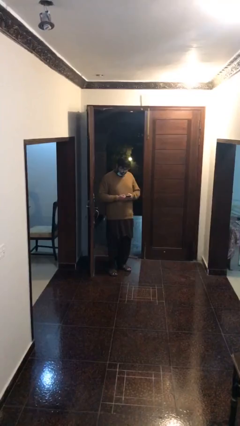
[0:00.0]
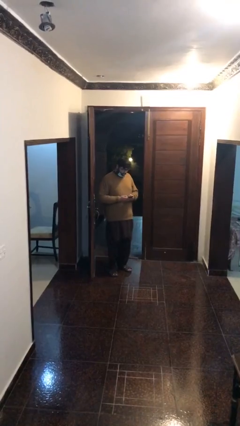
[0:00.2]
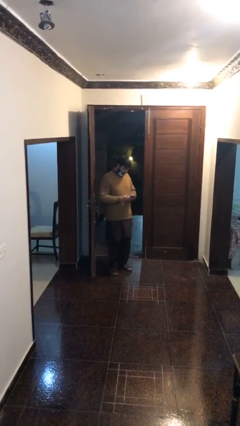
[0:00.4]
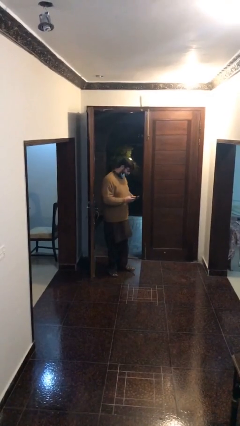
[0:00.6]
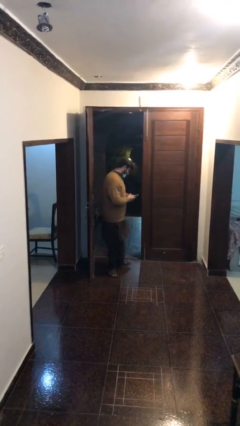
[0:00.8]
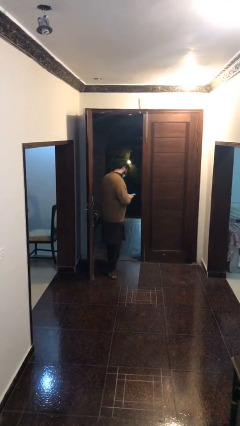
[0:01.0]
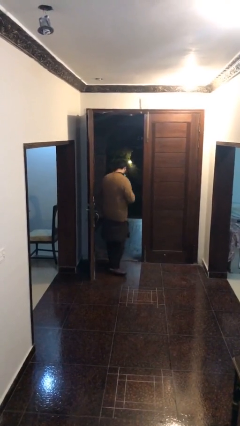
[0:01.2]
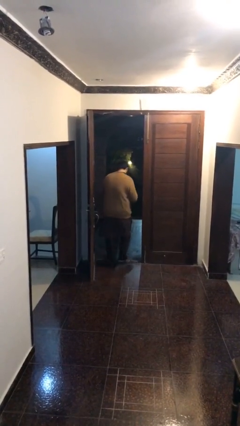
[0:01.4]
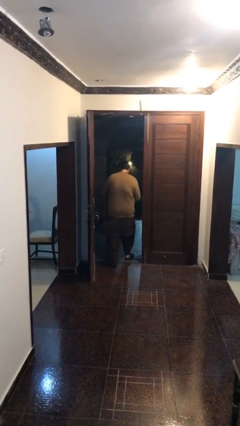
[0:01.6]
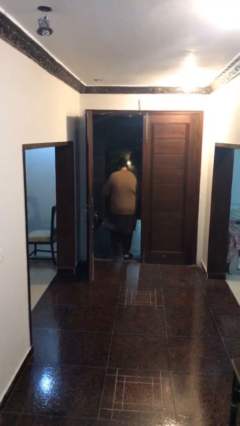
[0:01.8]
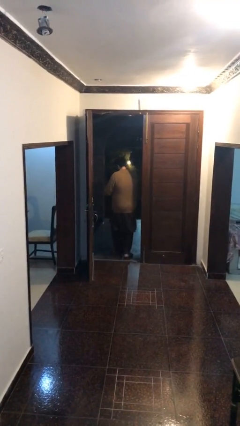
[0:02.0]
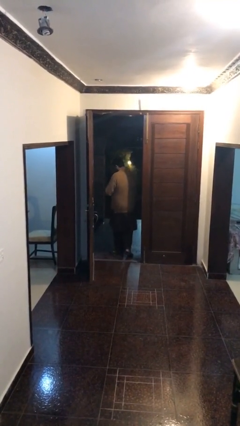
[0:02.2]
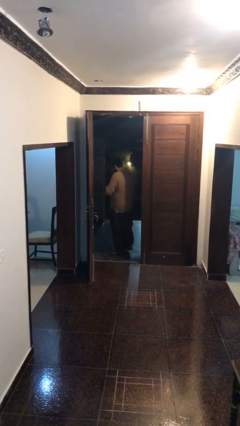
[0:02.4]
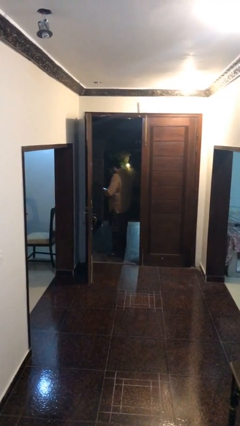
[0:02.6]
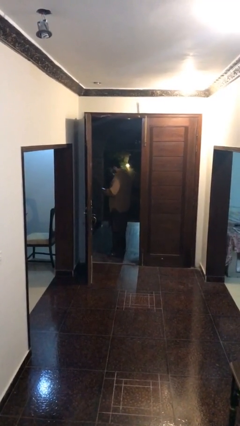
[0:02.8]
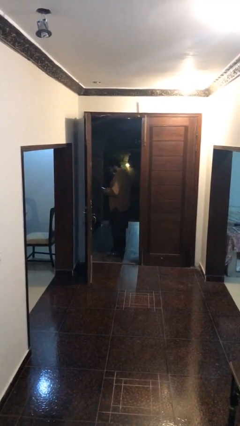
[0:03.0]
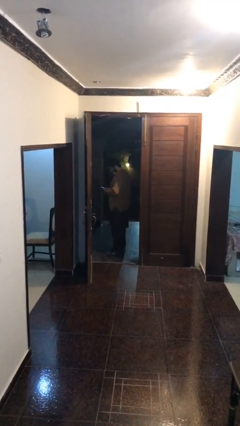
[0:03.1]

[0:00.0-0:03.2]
person exits scene through structure

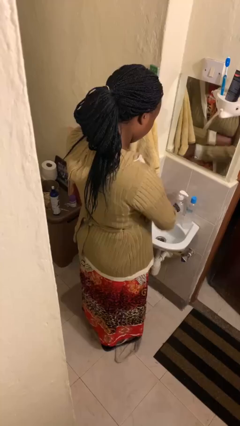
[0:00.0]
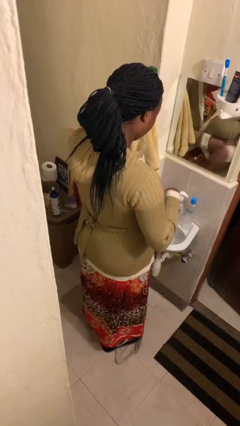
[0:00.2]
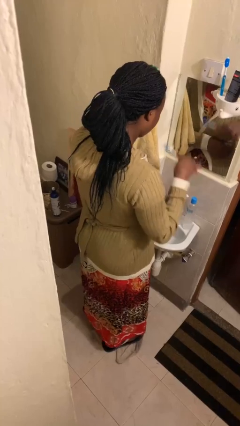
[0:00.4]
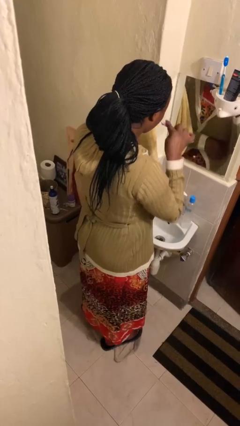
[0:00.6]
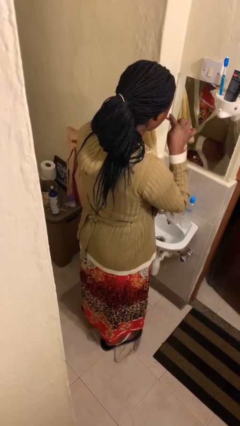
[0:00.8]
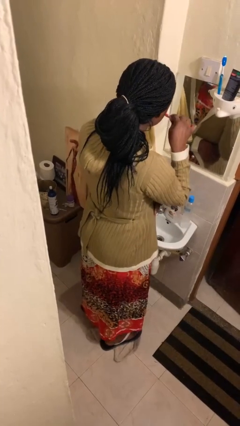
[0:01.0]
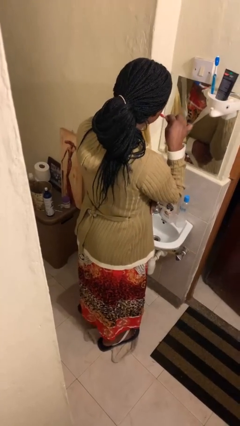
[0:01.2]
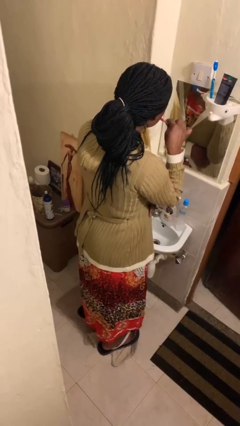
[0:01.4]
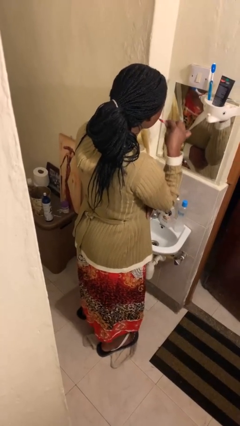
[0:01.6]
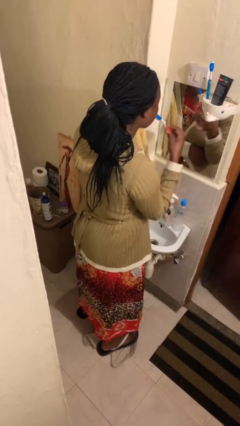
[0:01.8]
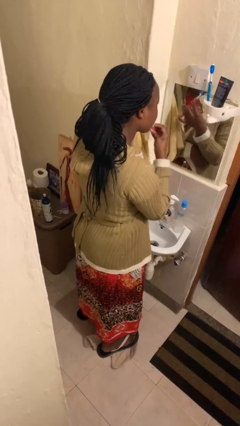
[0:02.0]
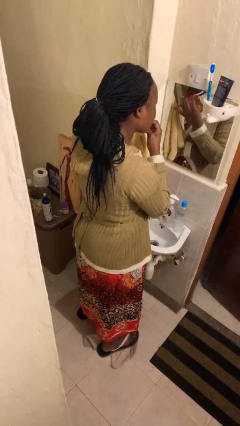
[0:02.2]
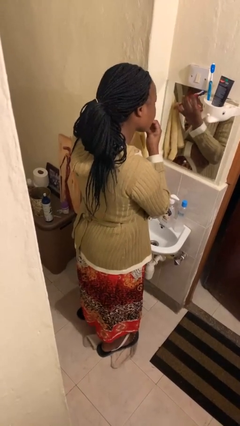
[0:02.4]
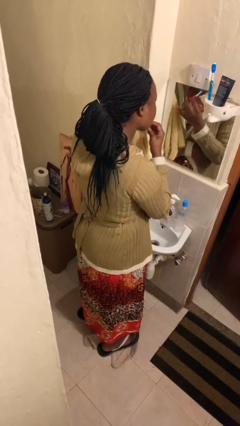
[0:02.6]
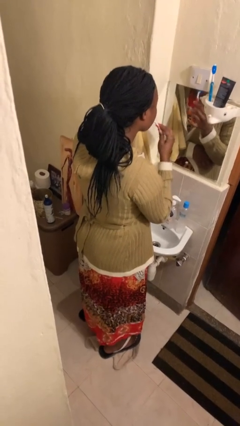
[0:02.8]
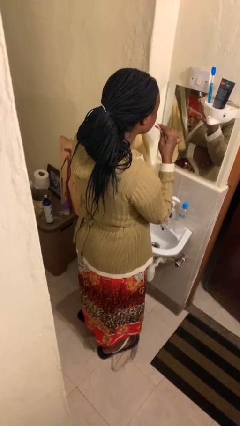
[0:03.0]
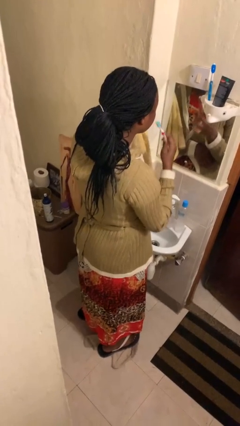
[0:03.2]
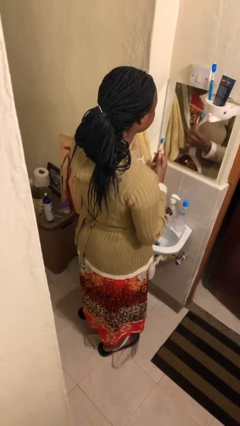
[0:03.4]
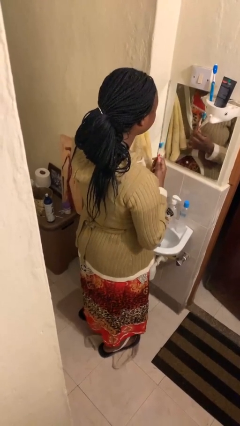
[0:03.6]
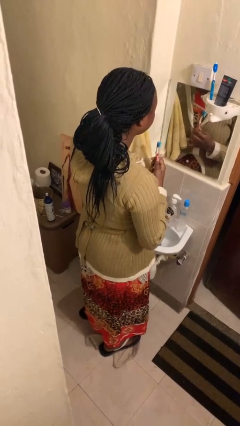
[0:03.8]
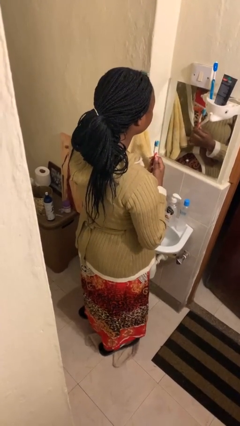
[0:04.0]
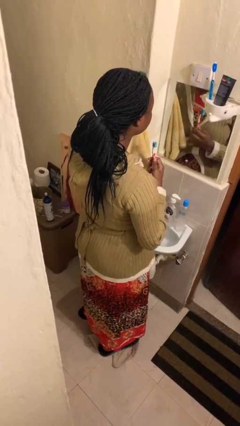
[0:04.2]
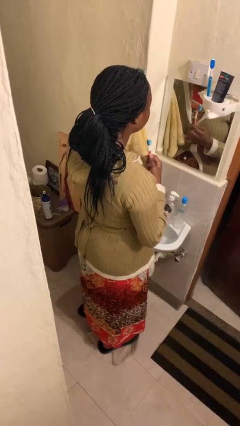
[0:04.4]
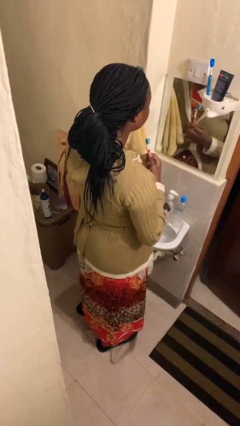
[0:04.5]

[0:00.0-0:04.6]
person brushes teeth

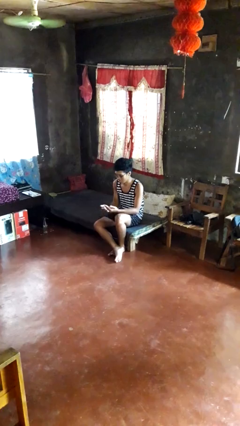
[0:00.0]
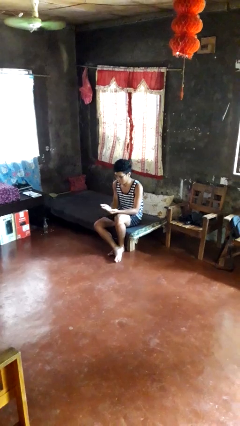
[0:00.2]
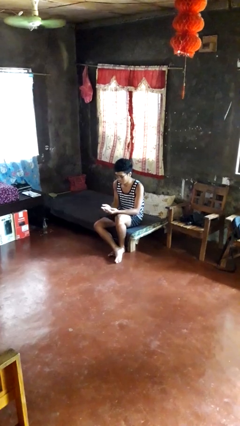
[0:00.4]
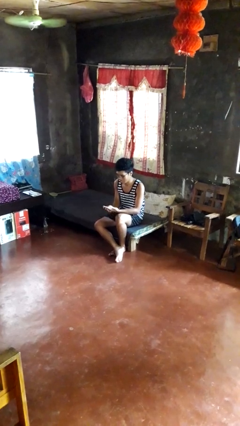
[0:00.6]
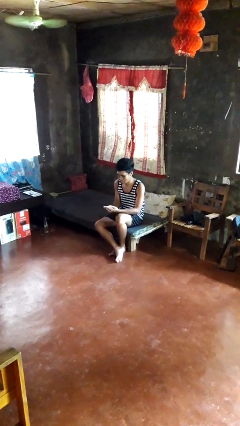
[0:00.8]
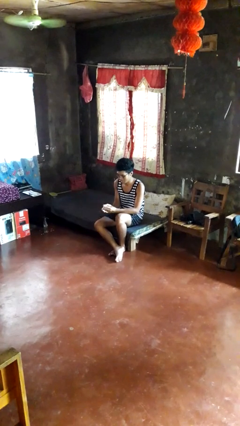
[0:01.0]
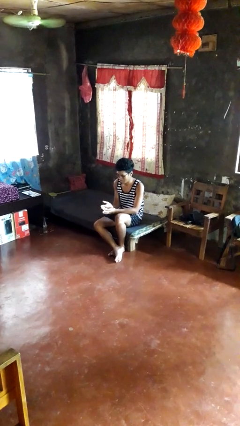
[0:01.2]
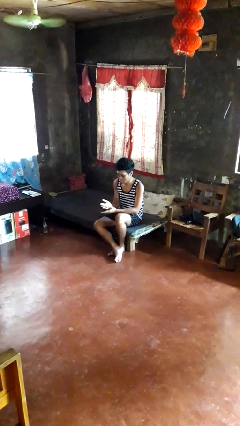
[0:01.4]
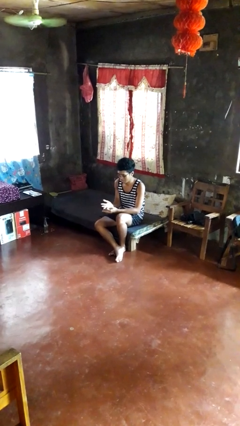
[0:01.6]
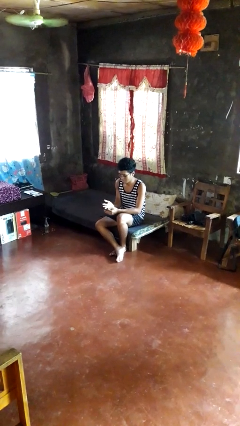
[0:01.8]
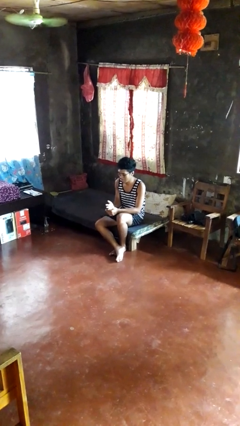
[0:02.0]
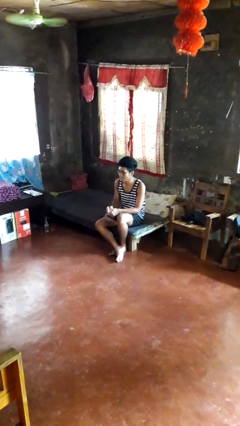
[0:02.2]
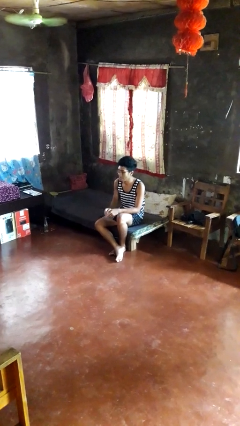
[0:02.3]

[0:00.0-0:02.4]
person looks at hands in lap

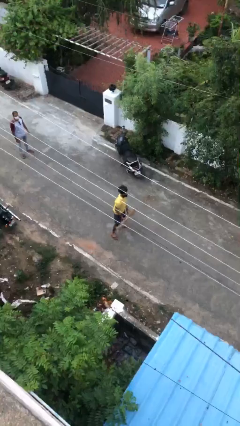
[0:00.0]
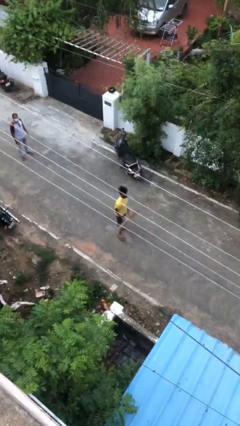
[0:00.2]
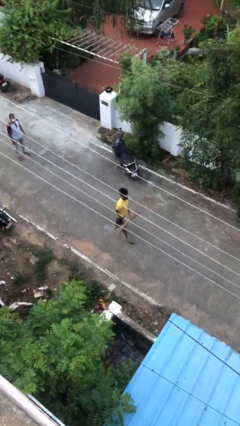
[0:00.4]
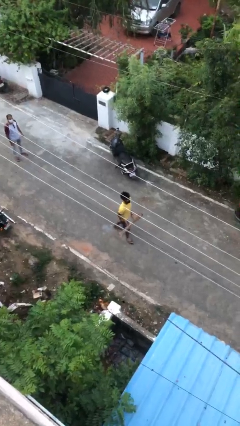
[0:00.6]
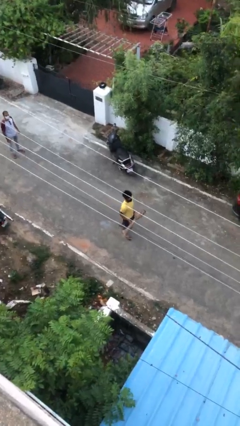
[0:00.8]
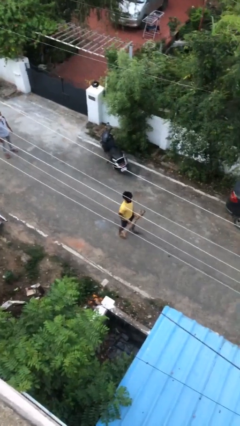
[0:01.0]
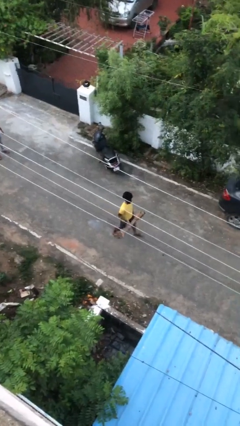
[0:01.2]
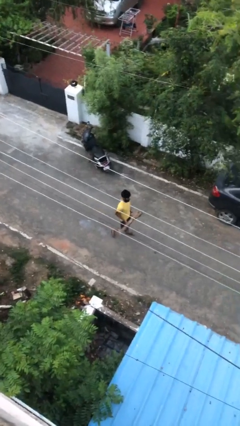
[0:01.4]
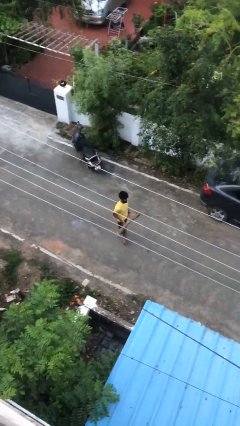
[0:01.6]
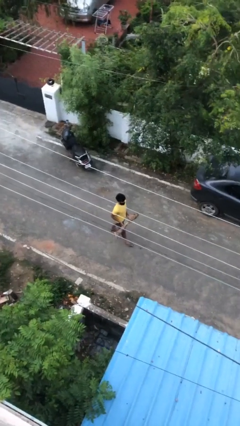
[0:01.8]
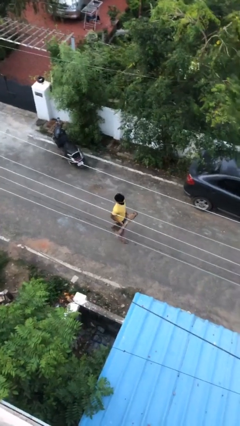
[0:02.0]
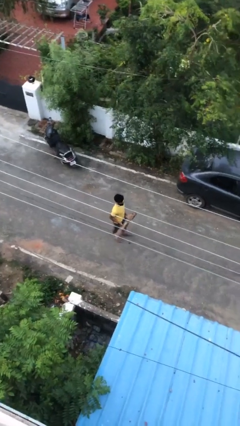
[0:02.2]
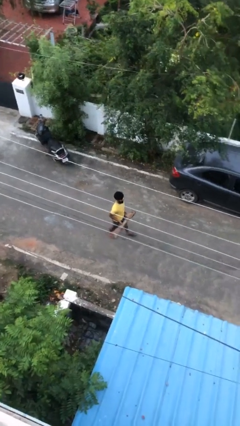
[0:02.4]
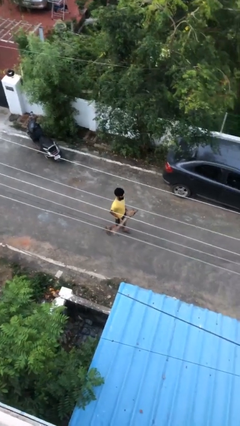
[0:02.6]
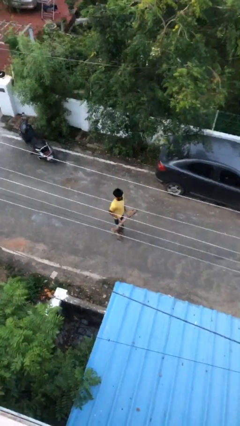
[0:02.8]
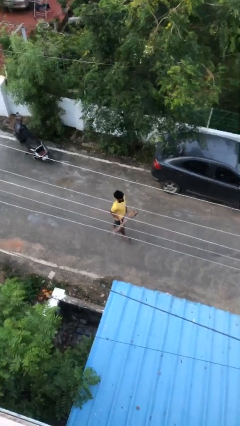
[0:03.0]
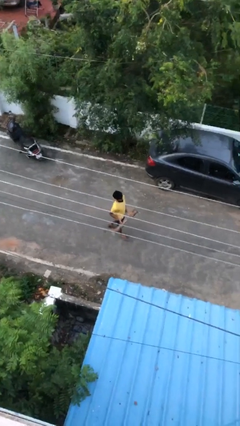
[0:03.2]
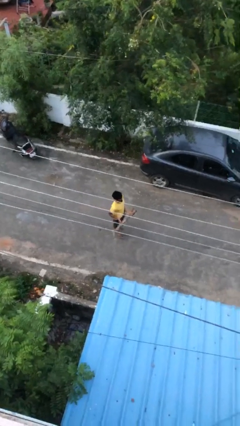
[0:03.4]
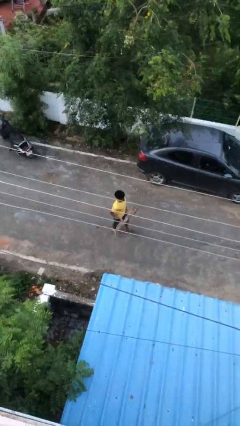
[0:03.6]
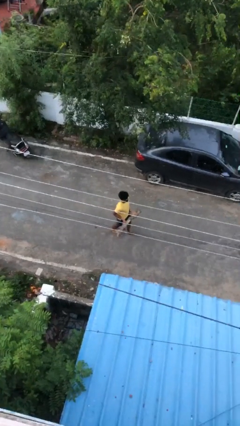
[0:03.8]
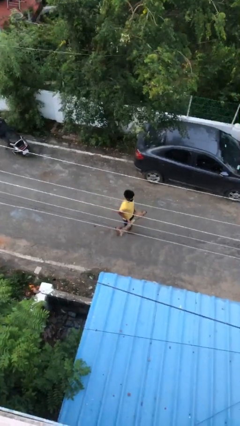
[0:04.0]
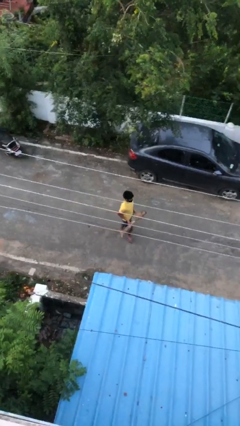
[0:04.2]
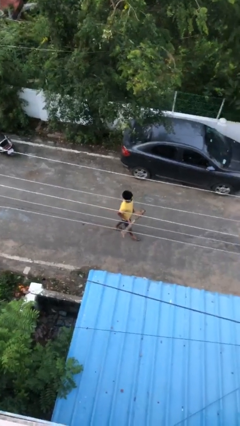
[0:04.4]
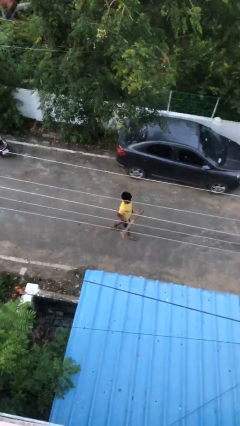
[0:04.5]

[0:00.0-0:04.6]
person carries heavy object

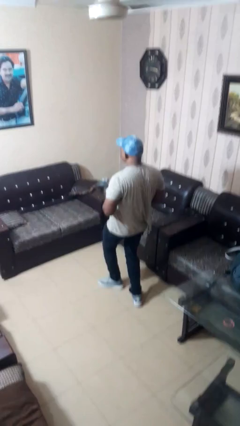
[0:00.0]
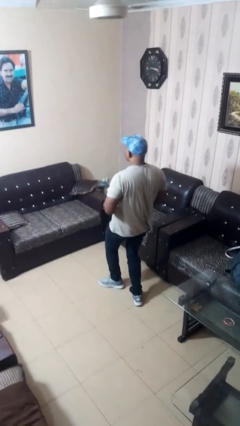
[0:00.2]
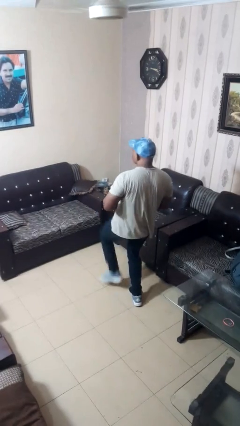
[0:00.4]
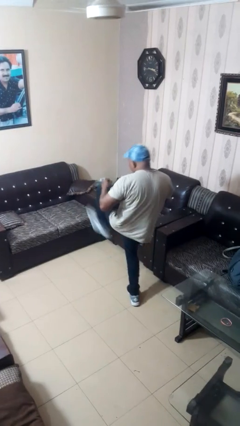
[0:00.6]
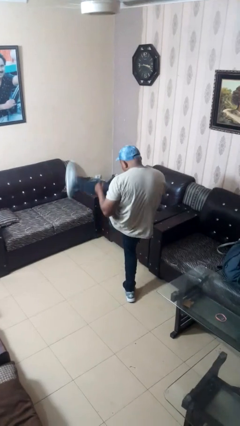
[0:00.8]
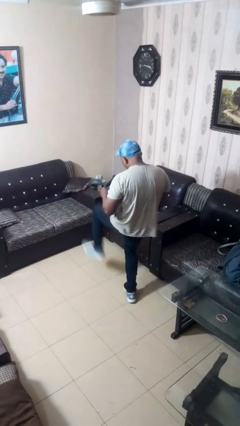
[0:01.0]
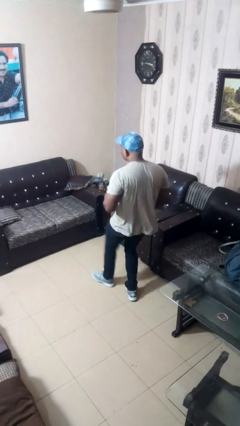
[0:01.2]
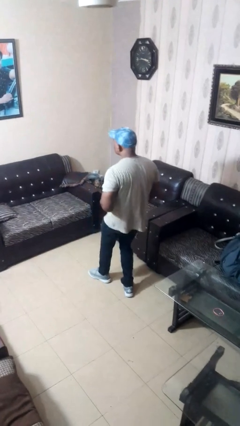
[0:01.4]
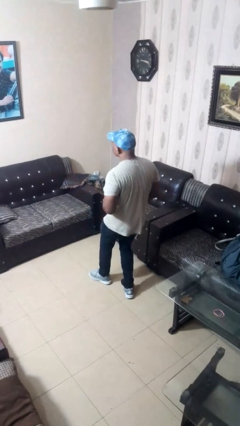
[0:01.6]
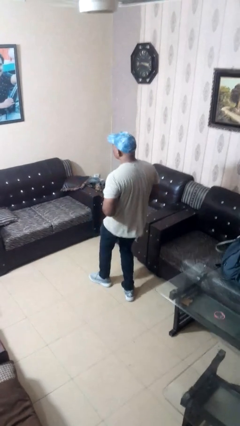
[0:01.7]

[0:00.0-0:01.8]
person karate kicks

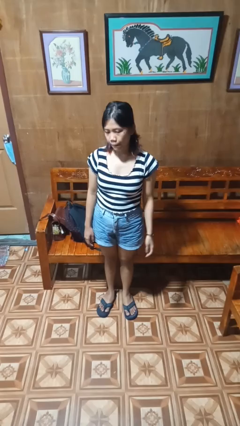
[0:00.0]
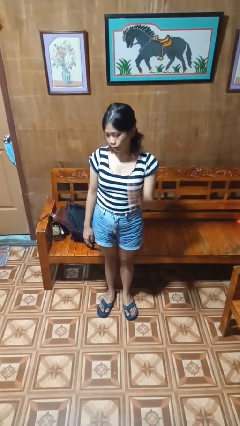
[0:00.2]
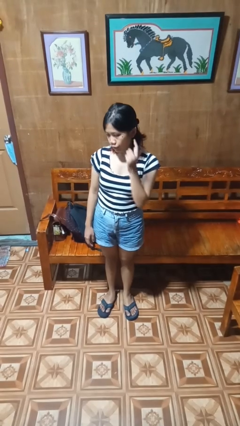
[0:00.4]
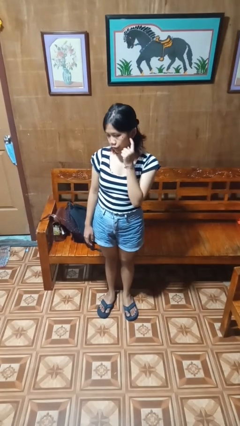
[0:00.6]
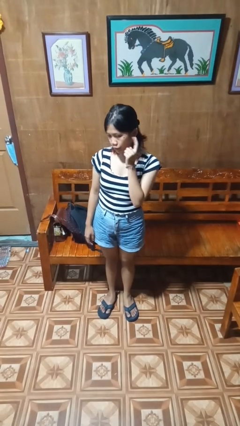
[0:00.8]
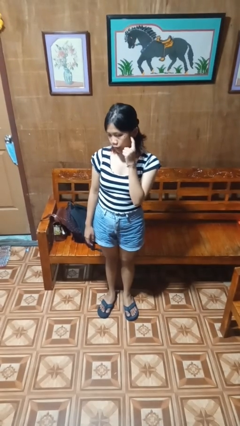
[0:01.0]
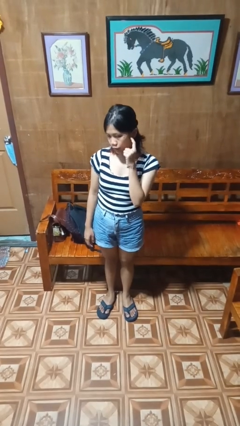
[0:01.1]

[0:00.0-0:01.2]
person gestures listen closely
